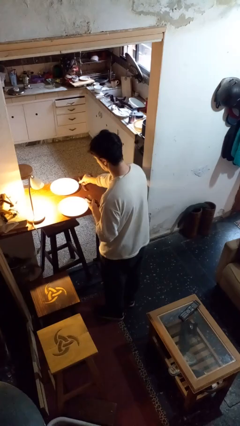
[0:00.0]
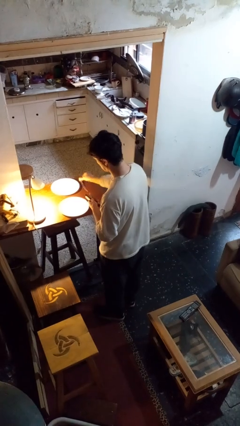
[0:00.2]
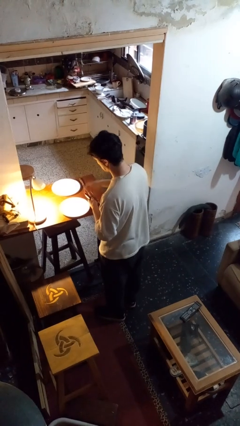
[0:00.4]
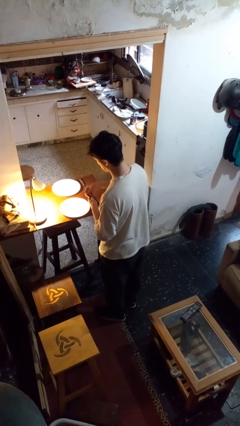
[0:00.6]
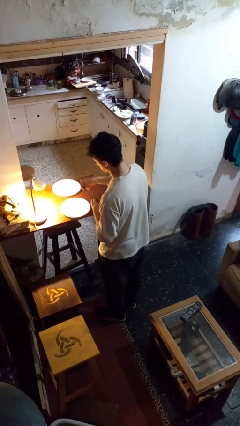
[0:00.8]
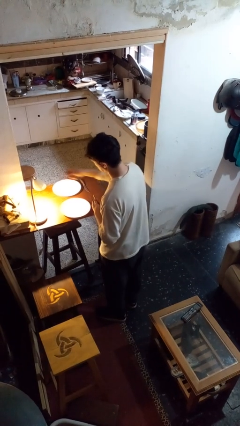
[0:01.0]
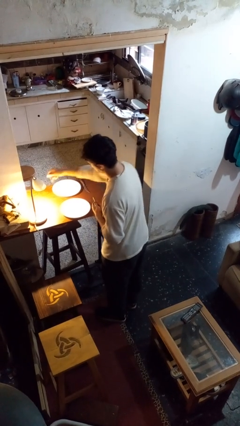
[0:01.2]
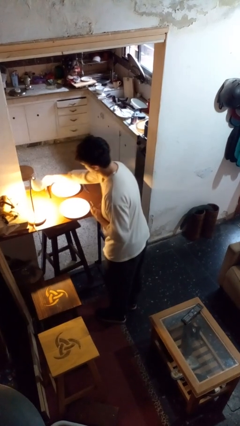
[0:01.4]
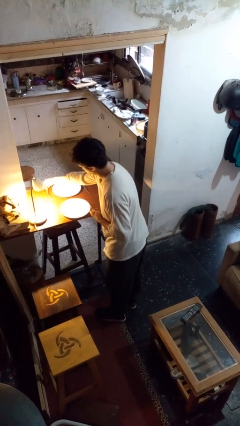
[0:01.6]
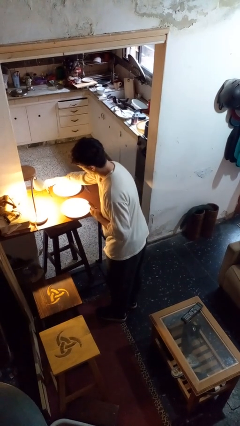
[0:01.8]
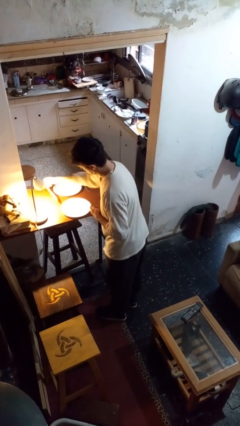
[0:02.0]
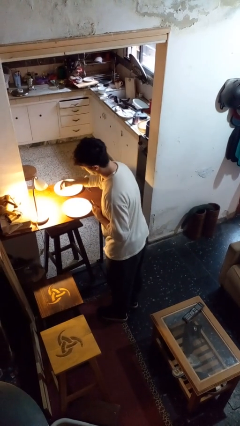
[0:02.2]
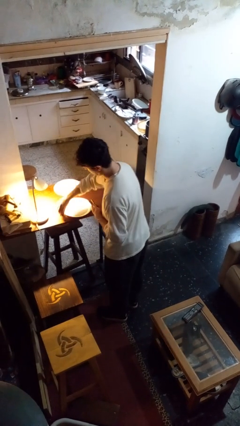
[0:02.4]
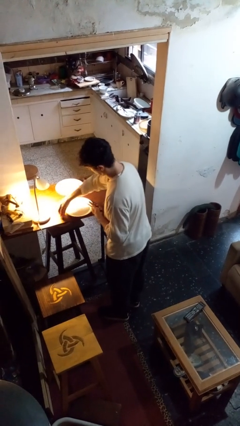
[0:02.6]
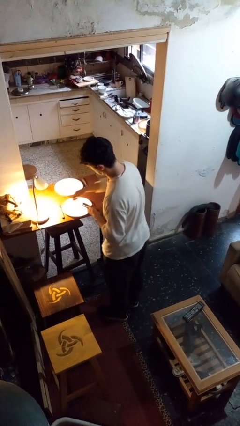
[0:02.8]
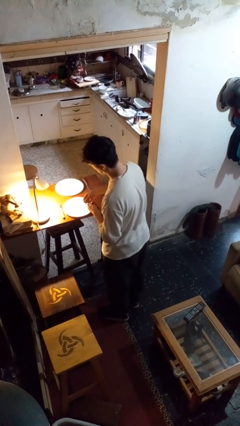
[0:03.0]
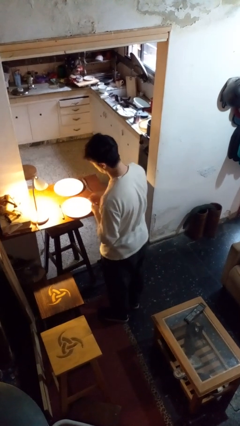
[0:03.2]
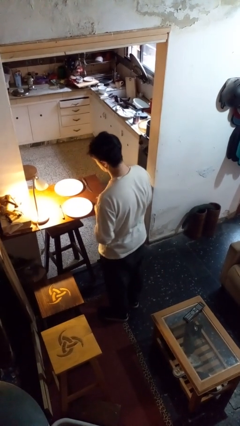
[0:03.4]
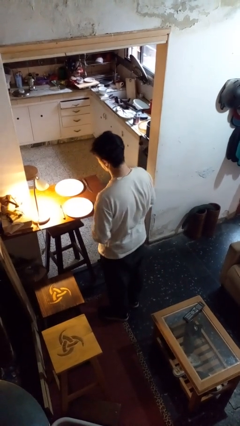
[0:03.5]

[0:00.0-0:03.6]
person sets table

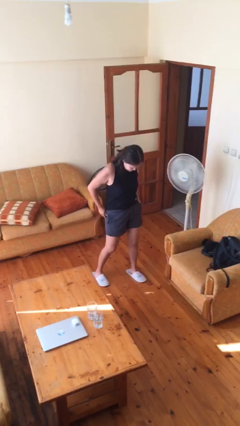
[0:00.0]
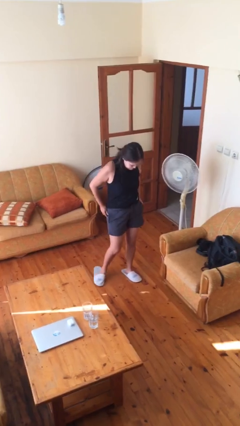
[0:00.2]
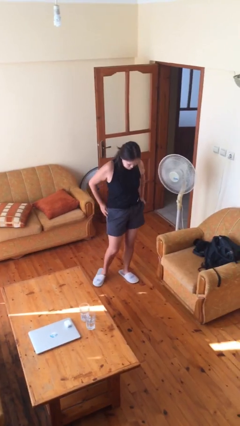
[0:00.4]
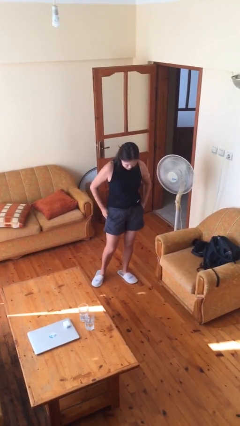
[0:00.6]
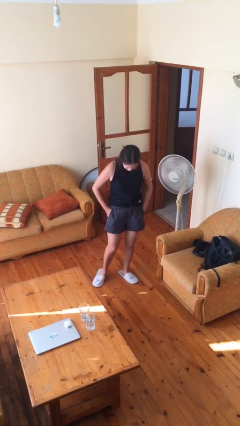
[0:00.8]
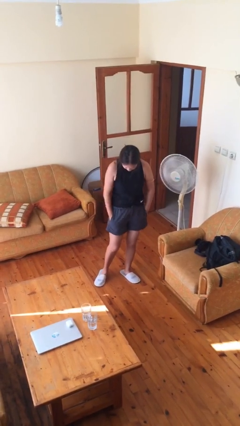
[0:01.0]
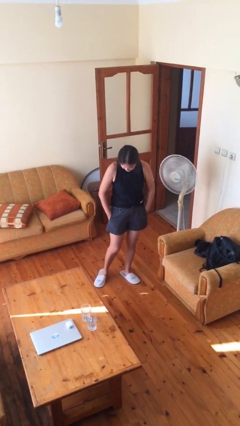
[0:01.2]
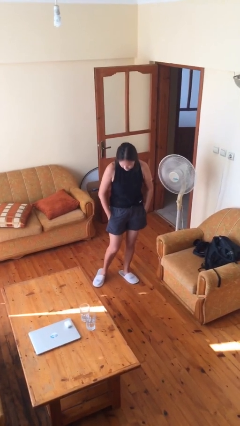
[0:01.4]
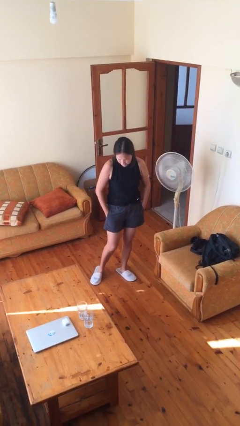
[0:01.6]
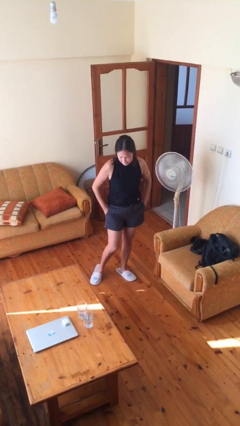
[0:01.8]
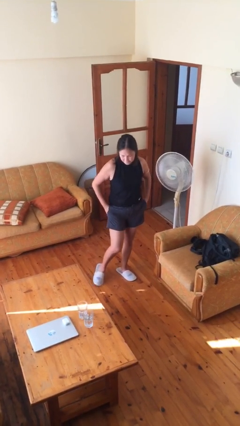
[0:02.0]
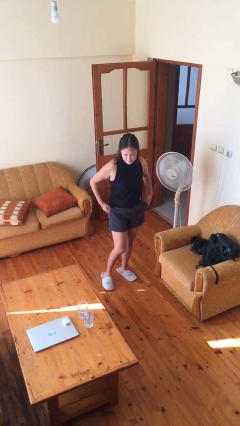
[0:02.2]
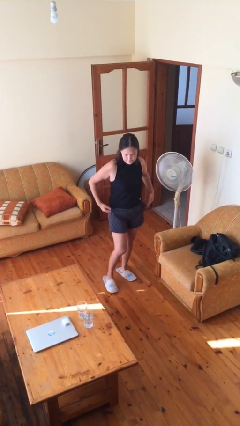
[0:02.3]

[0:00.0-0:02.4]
person puts hands in back pockets

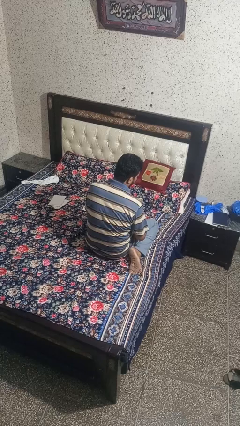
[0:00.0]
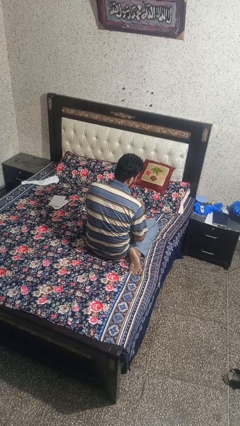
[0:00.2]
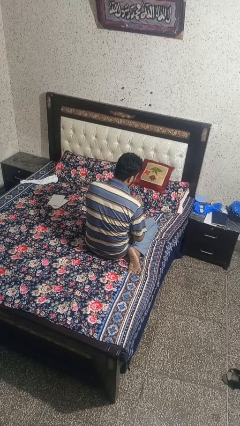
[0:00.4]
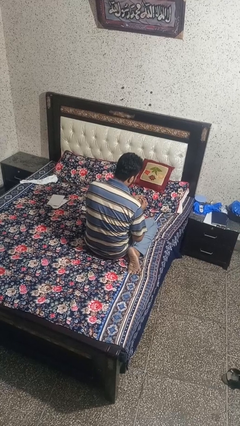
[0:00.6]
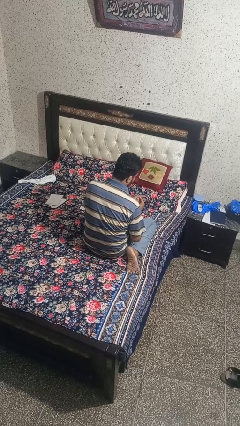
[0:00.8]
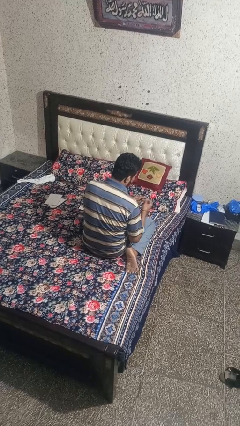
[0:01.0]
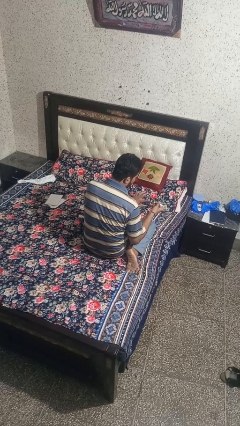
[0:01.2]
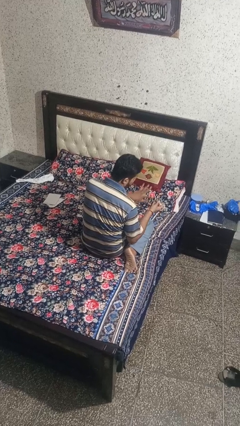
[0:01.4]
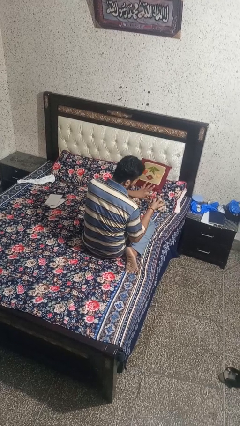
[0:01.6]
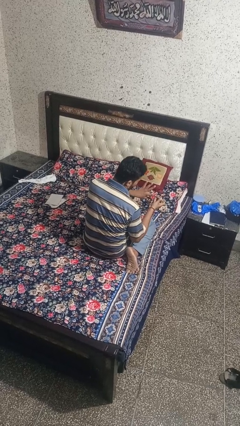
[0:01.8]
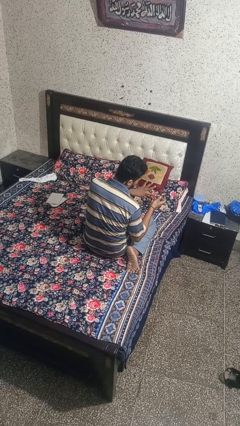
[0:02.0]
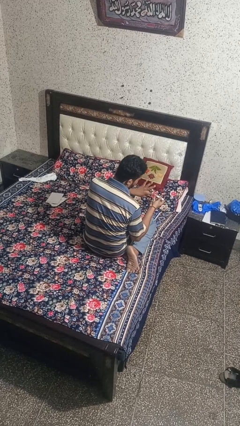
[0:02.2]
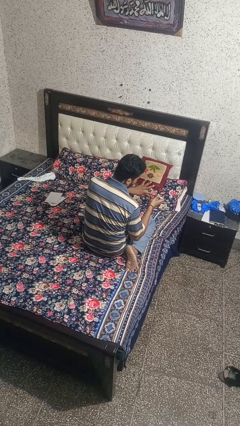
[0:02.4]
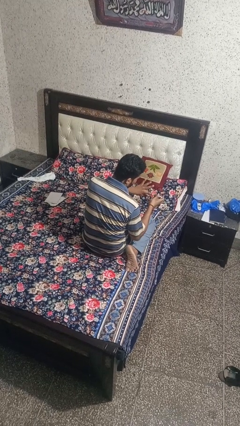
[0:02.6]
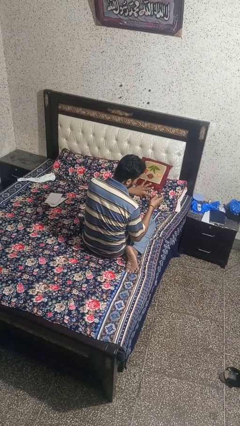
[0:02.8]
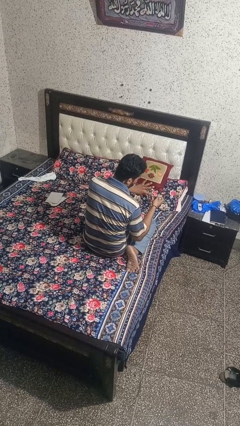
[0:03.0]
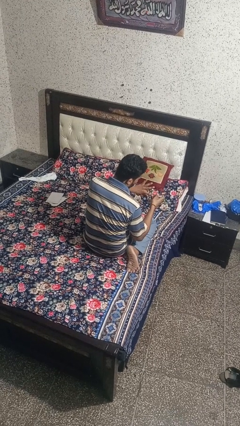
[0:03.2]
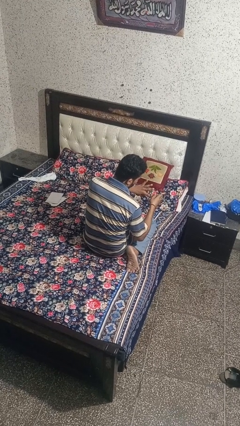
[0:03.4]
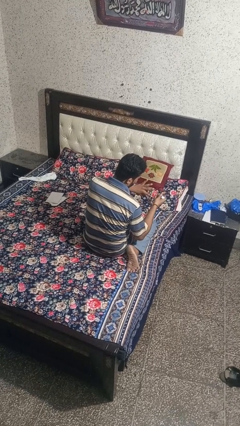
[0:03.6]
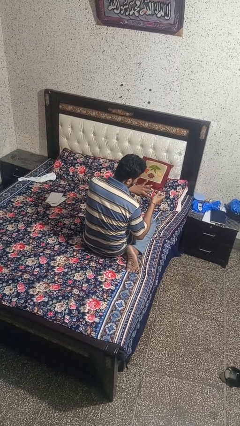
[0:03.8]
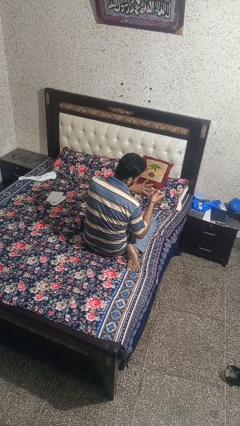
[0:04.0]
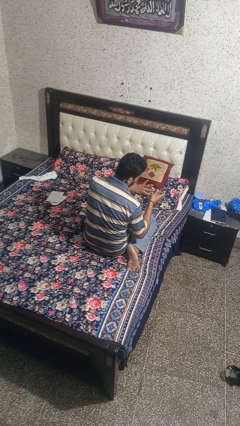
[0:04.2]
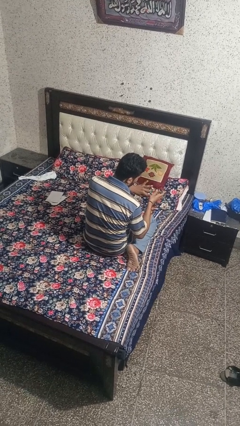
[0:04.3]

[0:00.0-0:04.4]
person clips fingernails

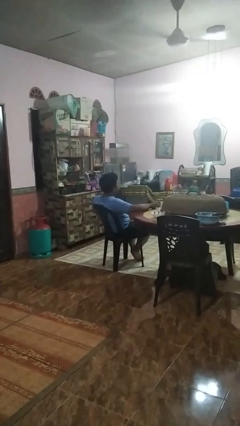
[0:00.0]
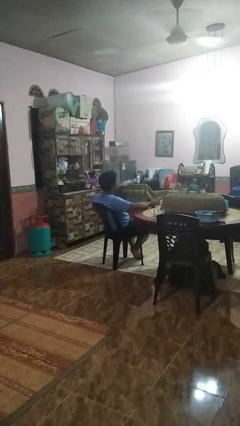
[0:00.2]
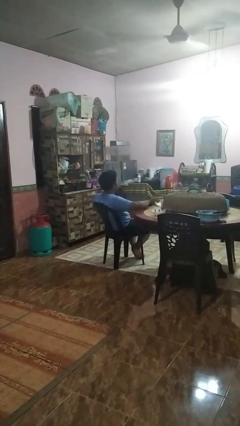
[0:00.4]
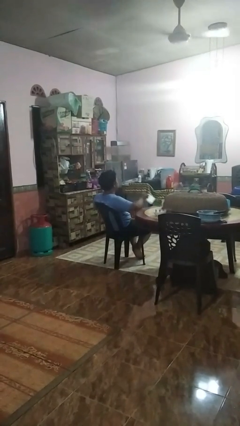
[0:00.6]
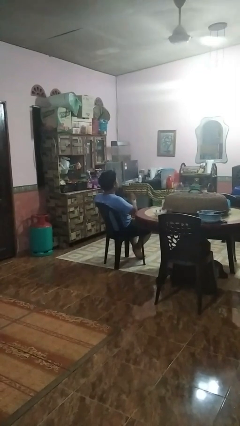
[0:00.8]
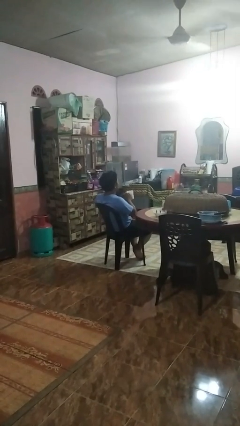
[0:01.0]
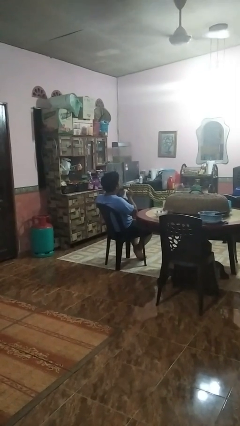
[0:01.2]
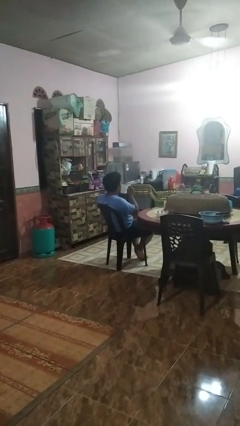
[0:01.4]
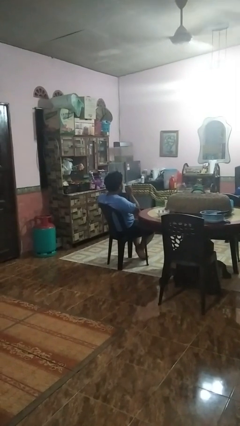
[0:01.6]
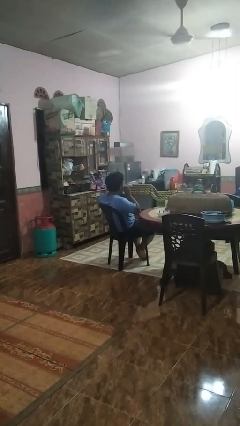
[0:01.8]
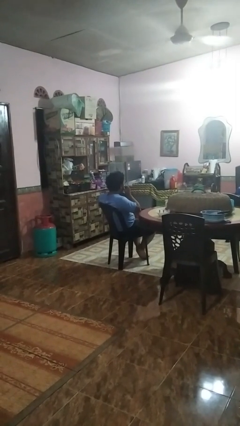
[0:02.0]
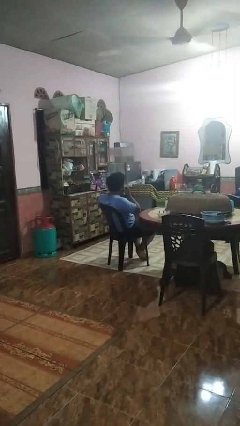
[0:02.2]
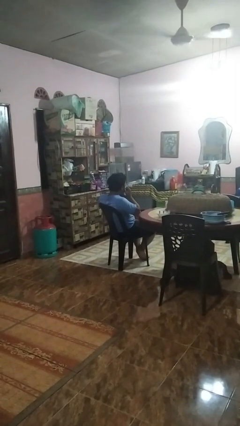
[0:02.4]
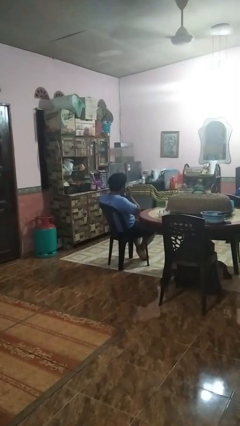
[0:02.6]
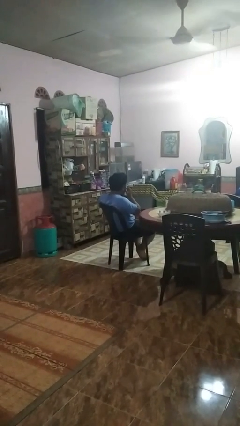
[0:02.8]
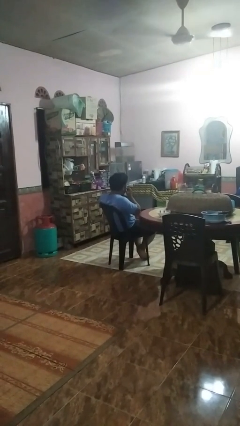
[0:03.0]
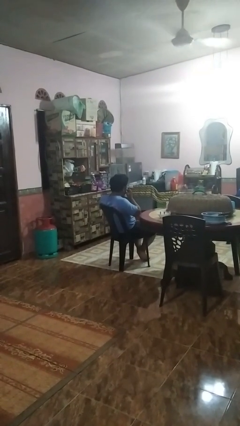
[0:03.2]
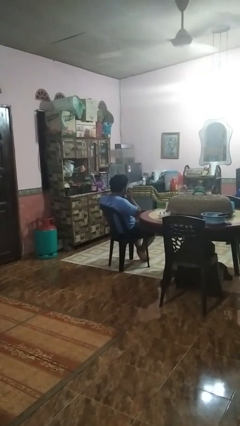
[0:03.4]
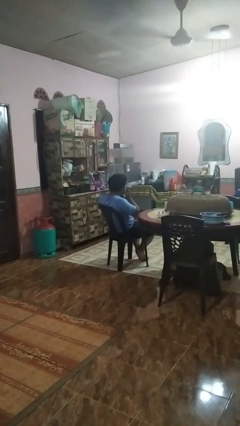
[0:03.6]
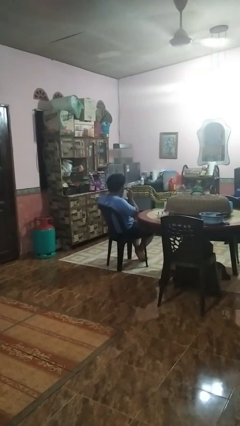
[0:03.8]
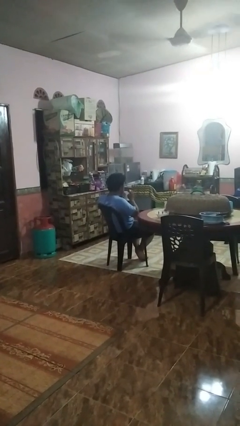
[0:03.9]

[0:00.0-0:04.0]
person blows nose

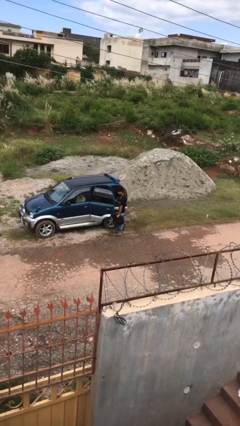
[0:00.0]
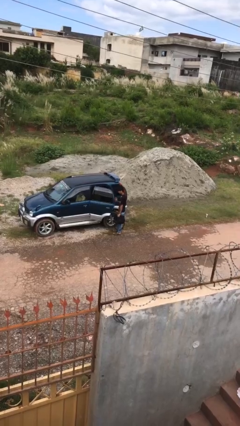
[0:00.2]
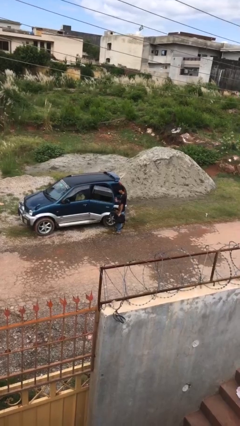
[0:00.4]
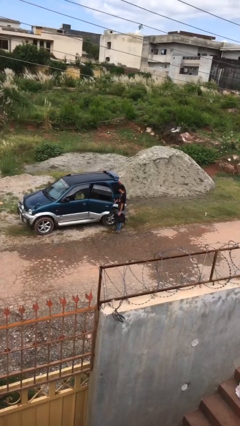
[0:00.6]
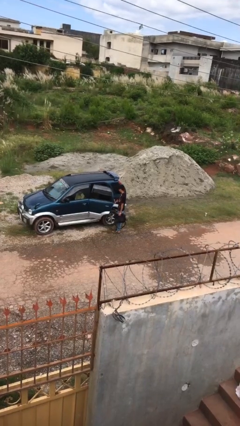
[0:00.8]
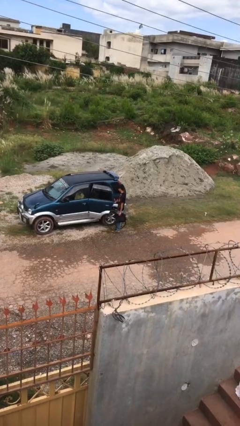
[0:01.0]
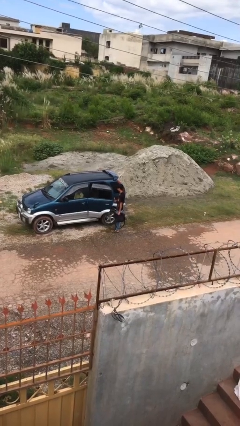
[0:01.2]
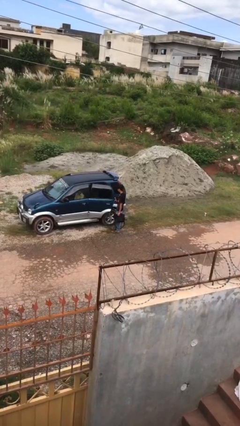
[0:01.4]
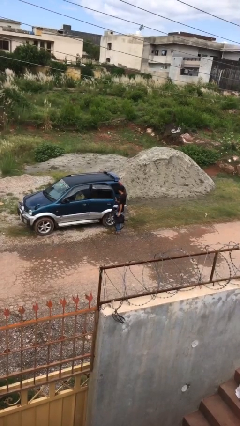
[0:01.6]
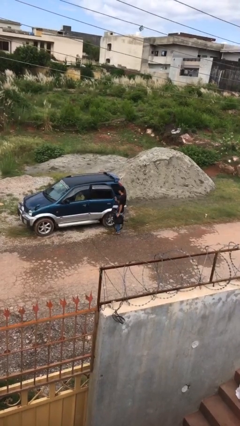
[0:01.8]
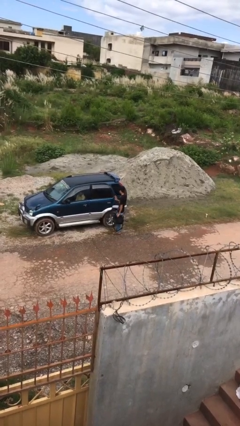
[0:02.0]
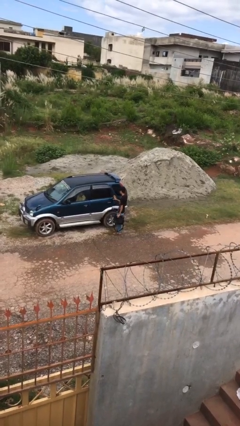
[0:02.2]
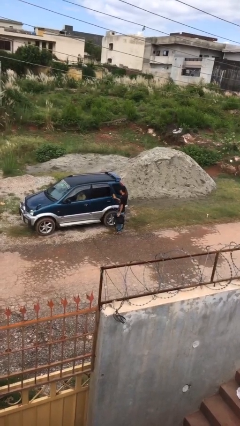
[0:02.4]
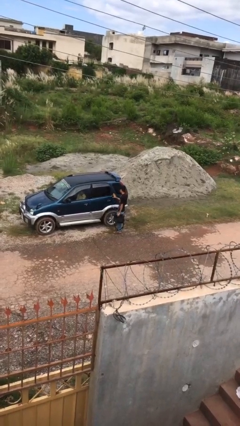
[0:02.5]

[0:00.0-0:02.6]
person closes car door

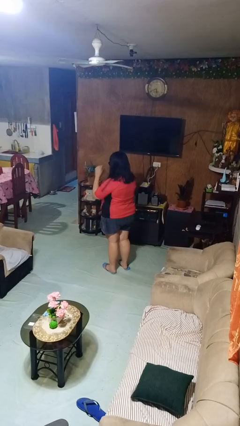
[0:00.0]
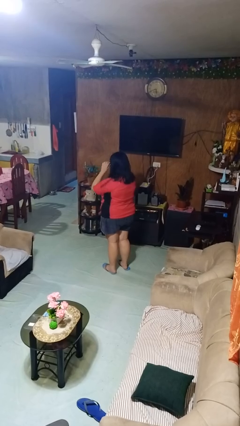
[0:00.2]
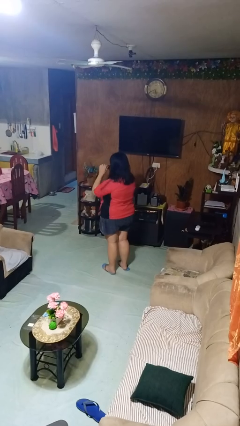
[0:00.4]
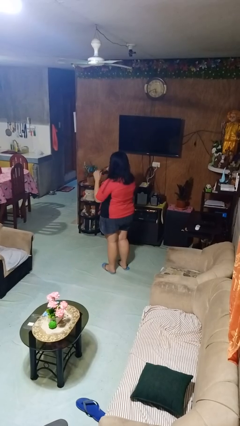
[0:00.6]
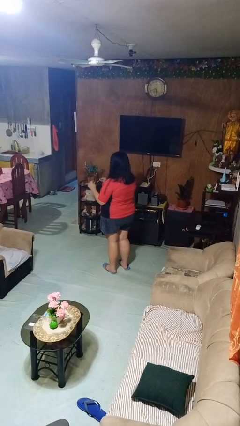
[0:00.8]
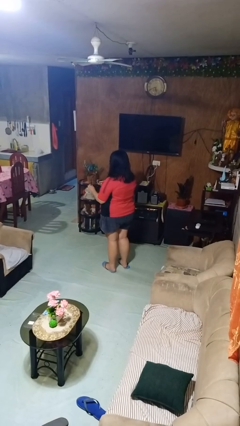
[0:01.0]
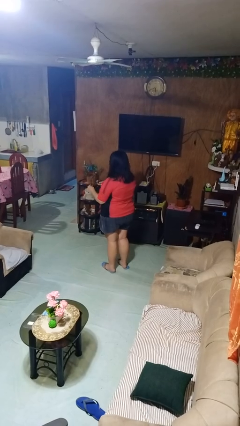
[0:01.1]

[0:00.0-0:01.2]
person takes off sunglasses
